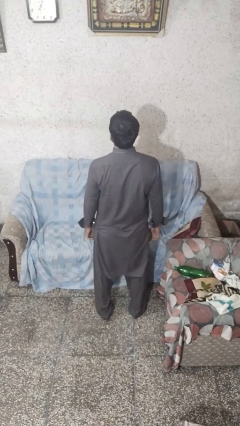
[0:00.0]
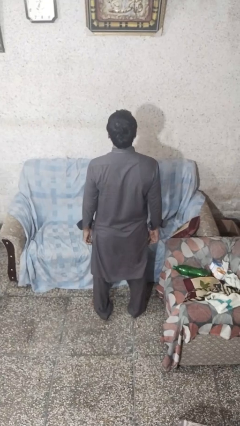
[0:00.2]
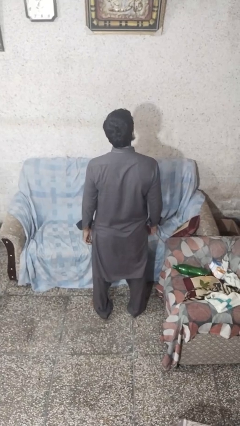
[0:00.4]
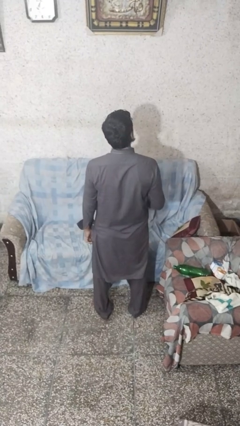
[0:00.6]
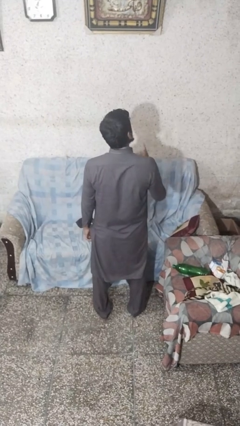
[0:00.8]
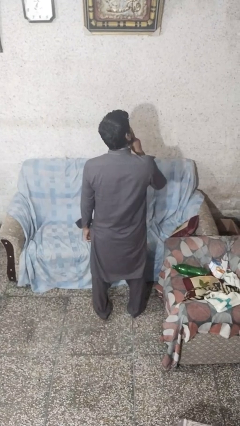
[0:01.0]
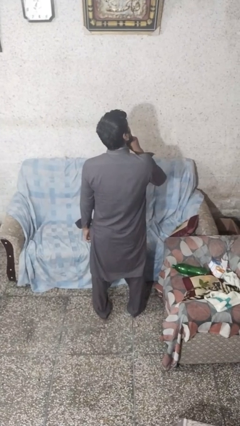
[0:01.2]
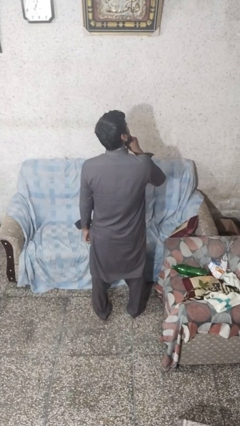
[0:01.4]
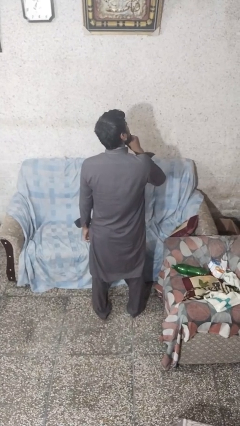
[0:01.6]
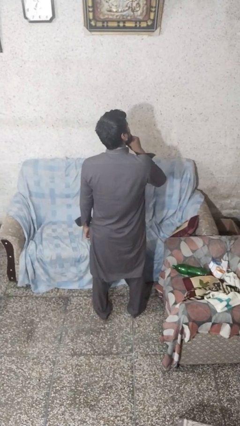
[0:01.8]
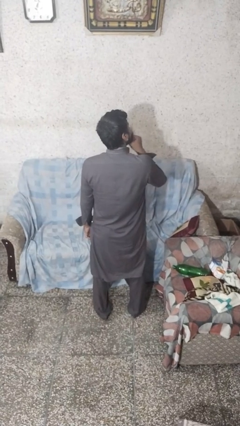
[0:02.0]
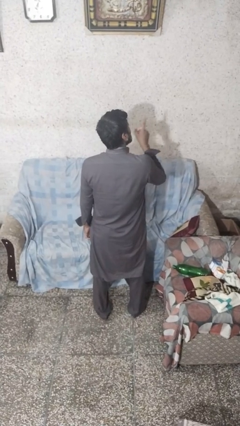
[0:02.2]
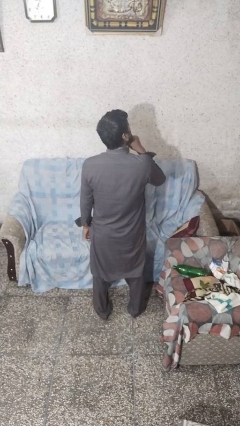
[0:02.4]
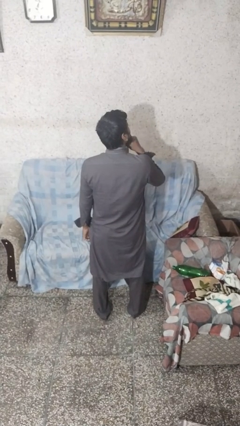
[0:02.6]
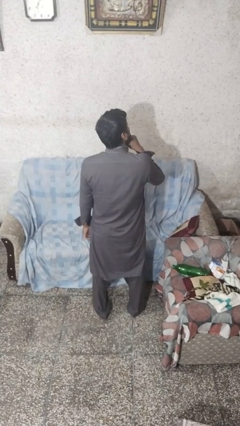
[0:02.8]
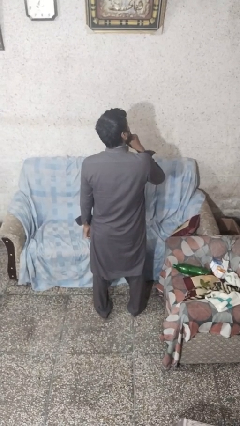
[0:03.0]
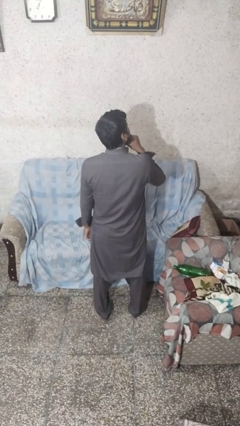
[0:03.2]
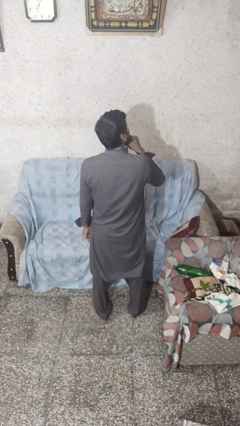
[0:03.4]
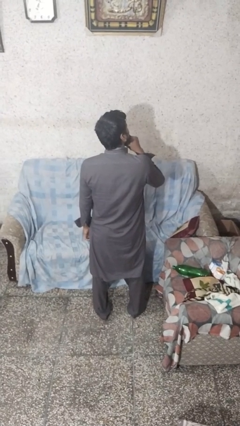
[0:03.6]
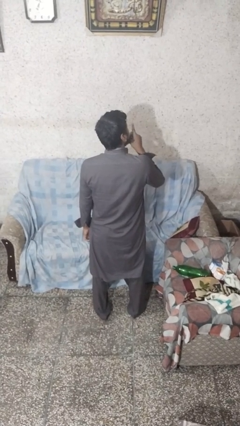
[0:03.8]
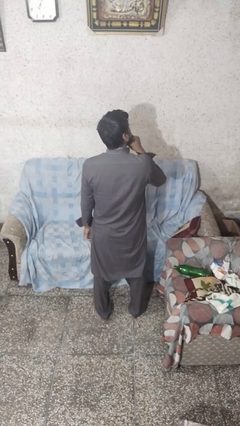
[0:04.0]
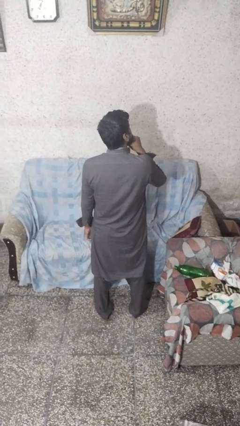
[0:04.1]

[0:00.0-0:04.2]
person gestures be quiet

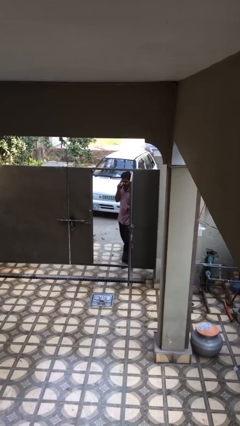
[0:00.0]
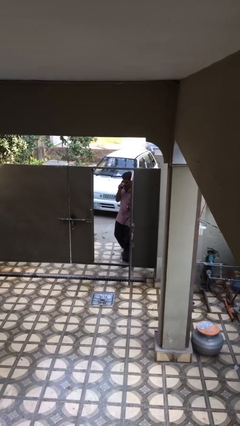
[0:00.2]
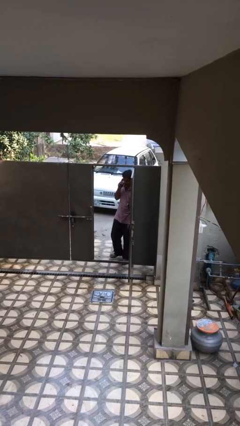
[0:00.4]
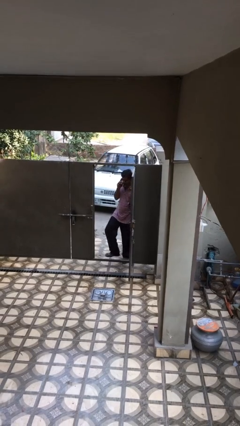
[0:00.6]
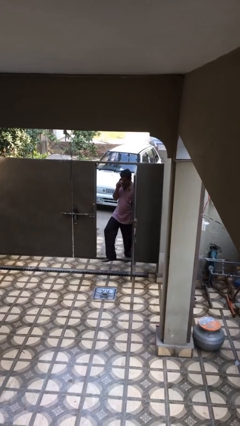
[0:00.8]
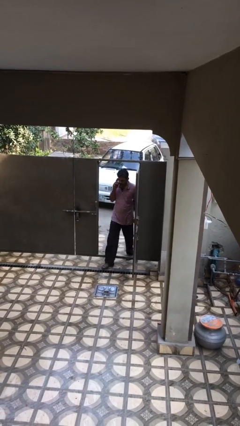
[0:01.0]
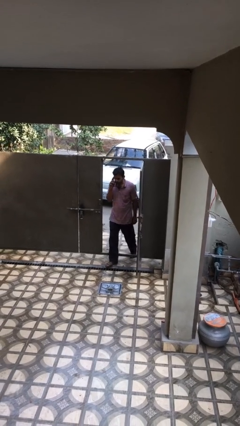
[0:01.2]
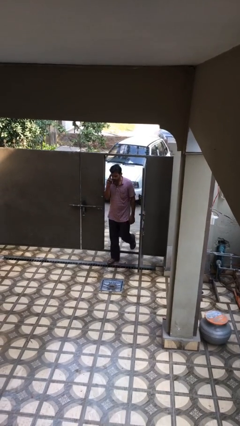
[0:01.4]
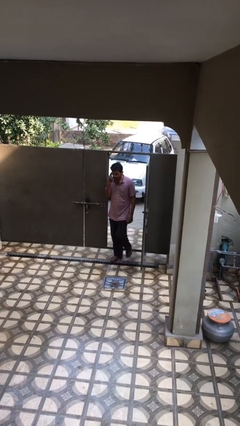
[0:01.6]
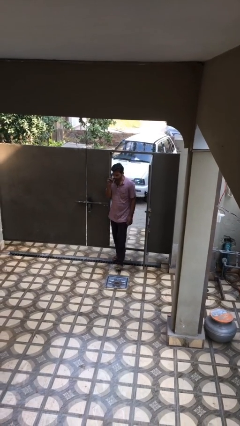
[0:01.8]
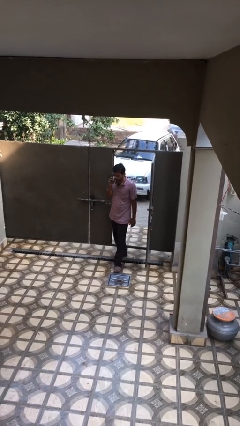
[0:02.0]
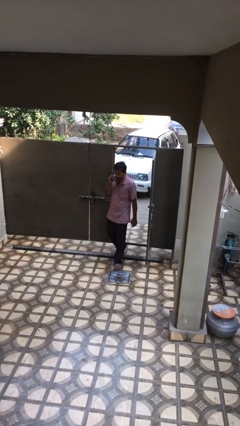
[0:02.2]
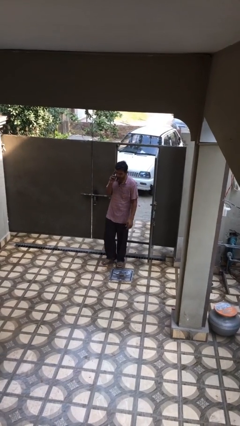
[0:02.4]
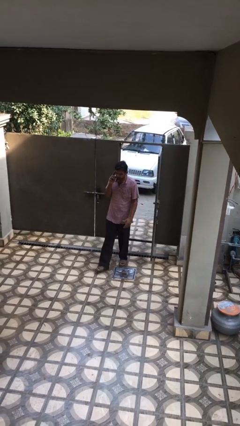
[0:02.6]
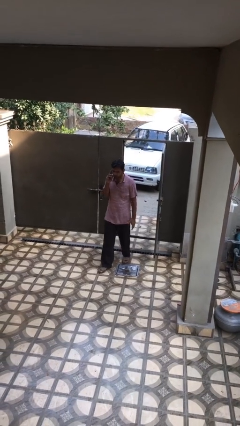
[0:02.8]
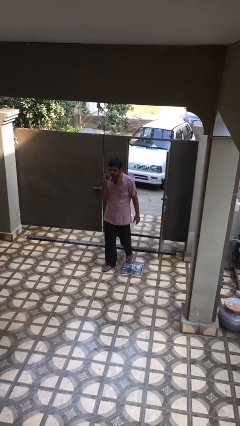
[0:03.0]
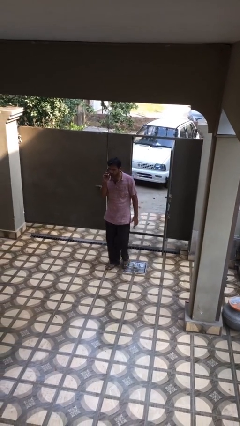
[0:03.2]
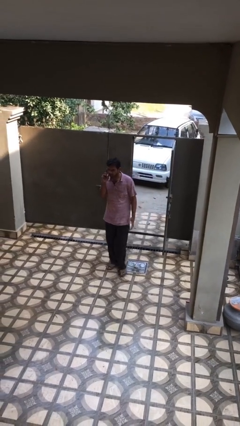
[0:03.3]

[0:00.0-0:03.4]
person enters scene through structure

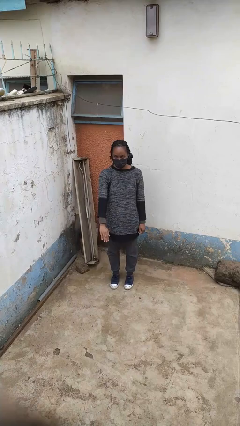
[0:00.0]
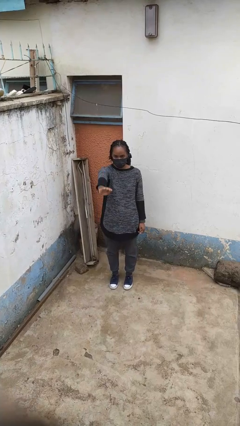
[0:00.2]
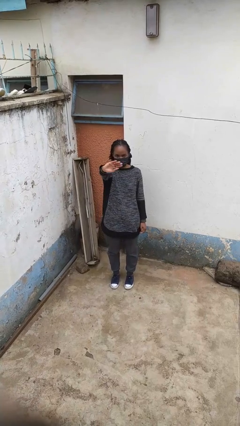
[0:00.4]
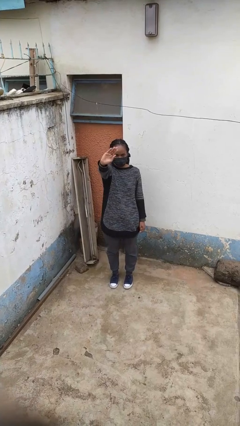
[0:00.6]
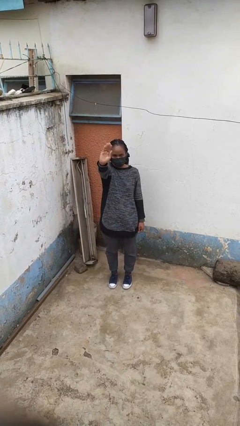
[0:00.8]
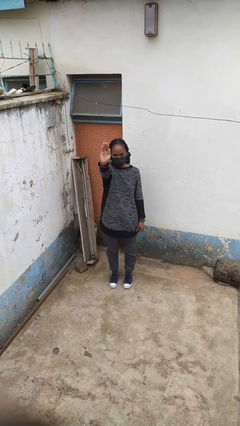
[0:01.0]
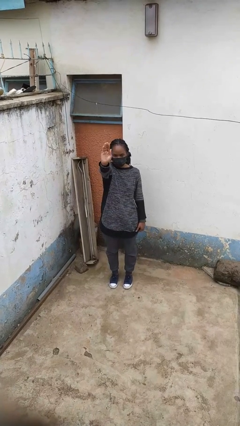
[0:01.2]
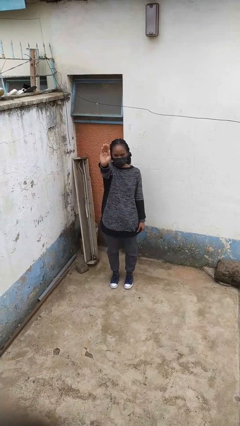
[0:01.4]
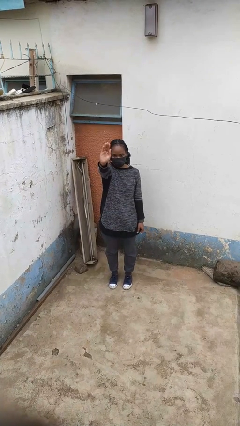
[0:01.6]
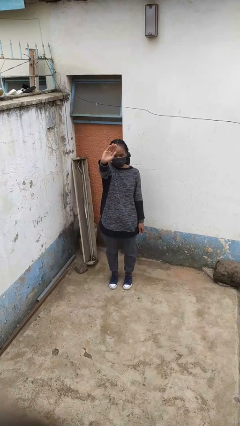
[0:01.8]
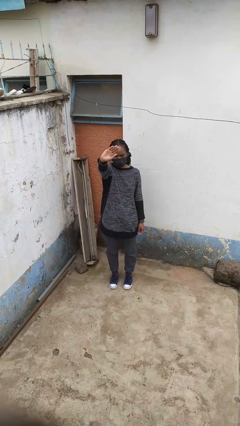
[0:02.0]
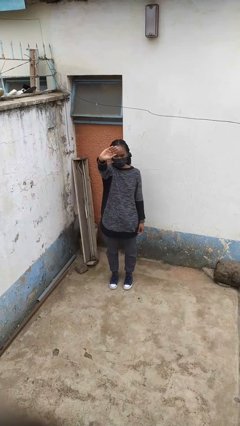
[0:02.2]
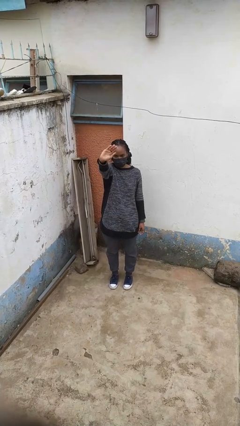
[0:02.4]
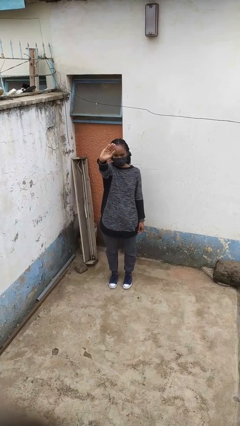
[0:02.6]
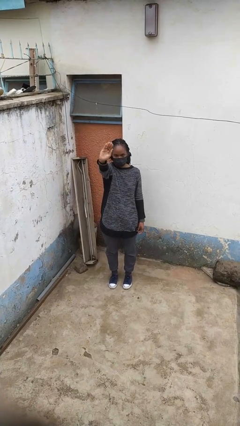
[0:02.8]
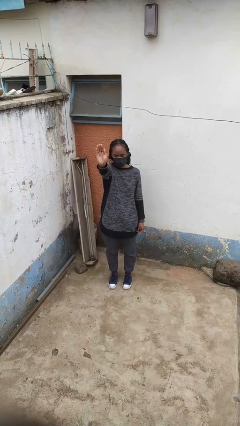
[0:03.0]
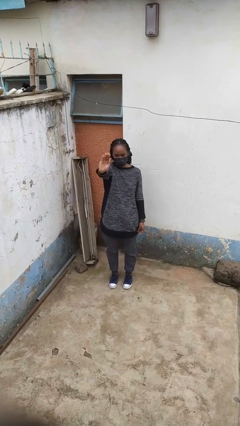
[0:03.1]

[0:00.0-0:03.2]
person waves at person

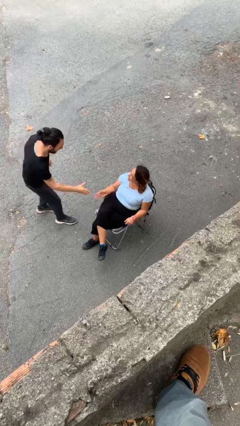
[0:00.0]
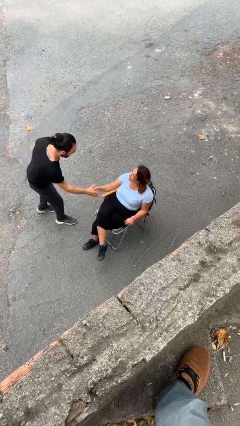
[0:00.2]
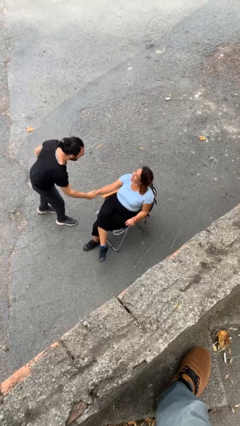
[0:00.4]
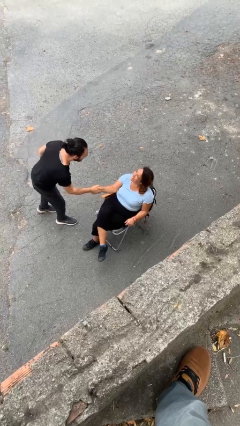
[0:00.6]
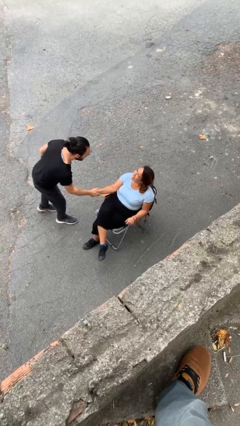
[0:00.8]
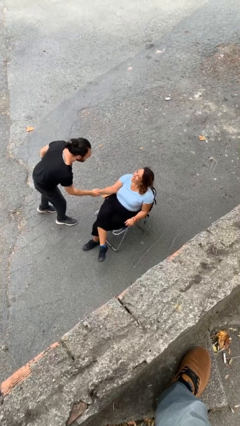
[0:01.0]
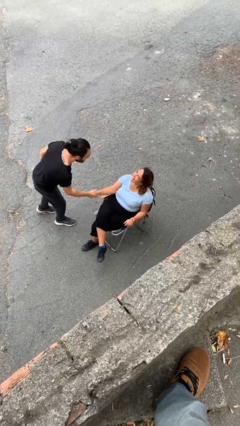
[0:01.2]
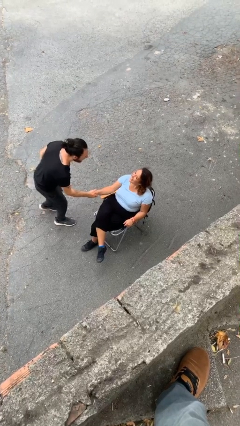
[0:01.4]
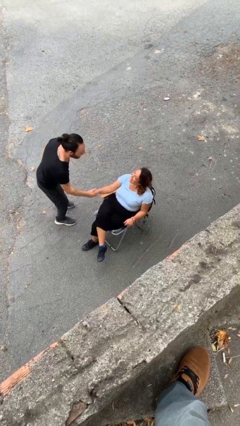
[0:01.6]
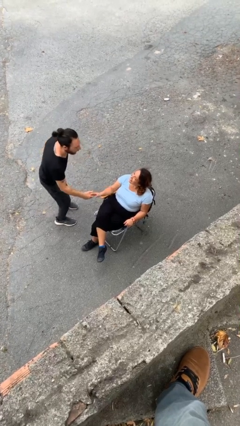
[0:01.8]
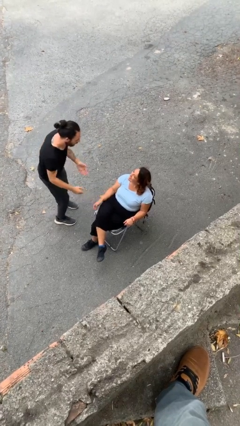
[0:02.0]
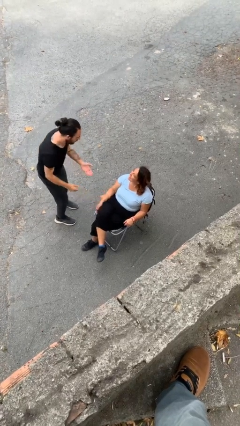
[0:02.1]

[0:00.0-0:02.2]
person shakes hand

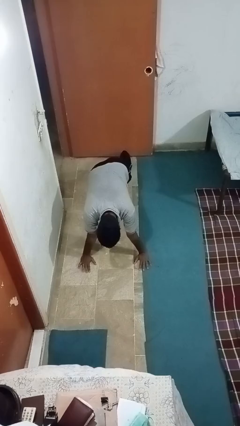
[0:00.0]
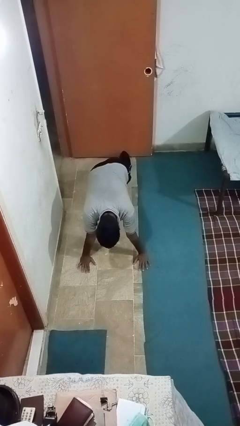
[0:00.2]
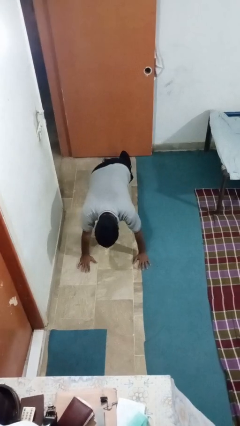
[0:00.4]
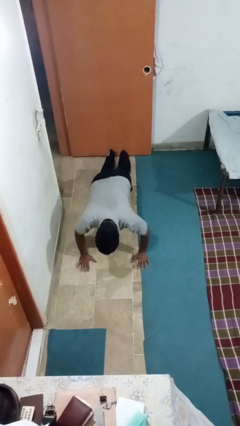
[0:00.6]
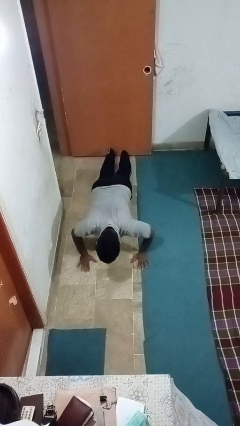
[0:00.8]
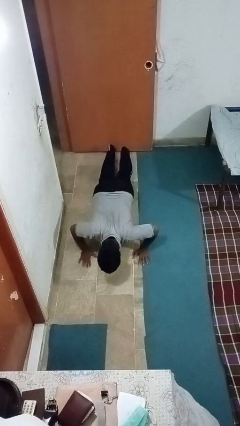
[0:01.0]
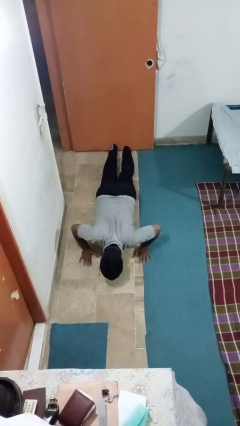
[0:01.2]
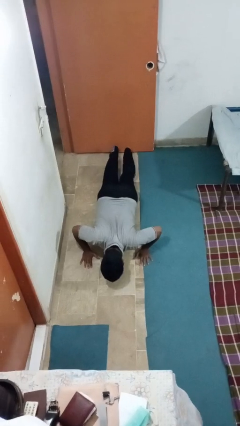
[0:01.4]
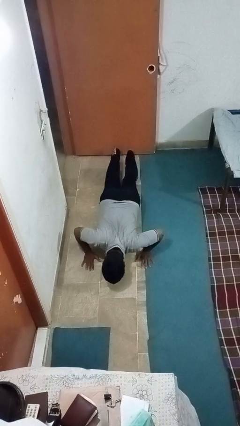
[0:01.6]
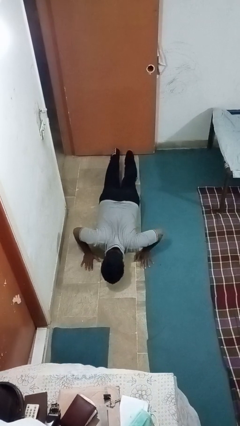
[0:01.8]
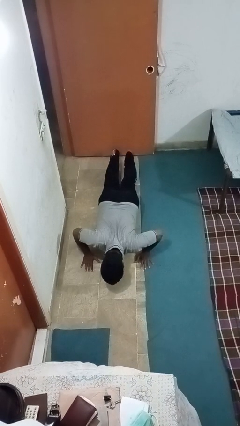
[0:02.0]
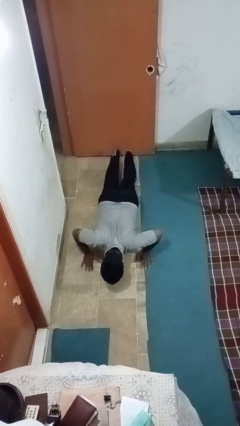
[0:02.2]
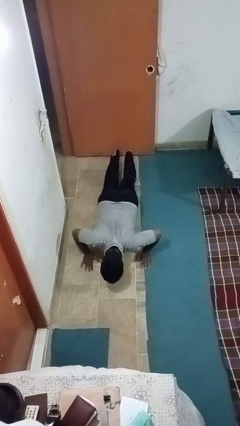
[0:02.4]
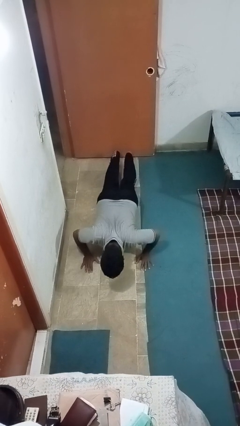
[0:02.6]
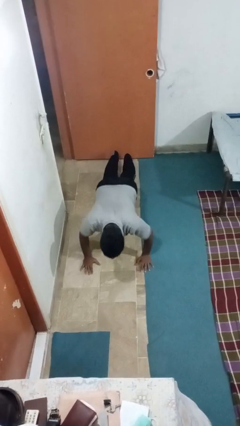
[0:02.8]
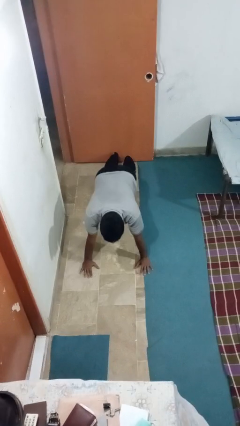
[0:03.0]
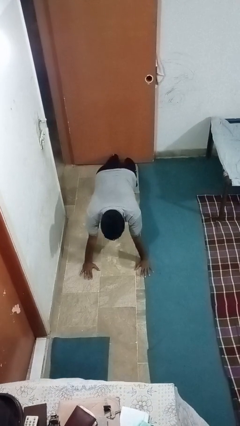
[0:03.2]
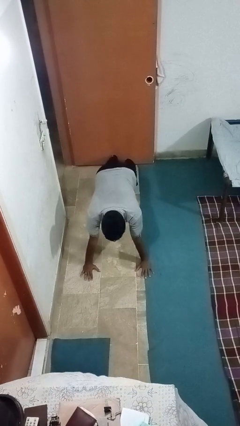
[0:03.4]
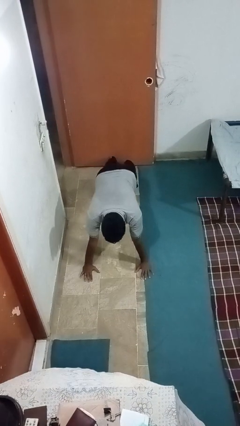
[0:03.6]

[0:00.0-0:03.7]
person exercises with pushup

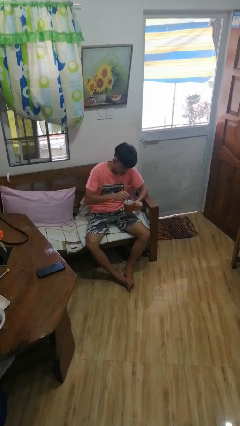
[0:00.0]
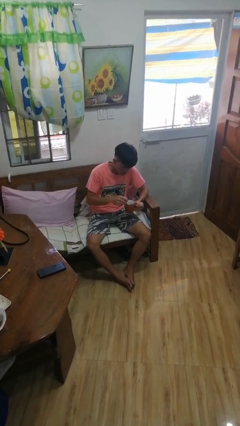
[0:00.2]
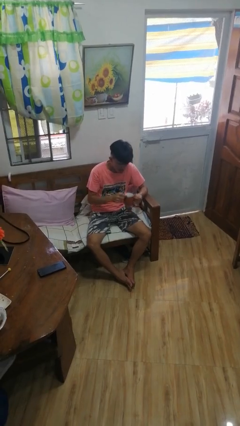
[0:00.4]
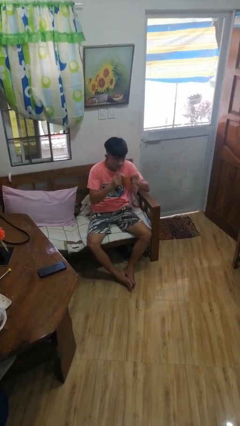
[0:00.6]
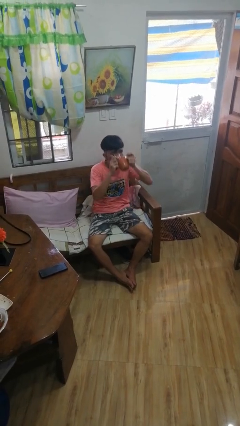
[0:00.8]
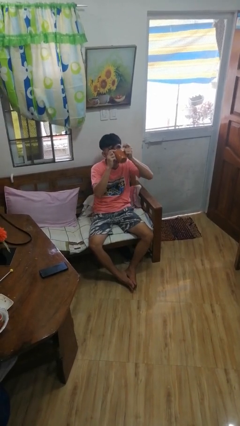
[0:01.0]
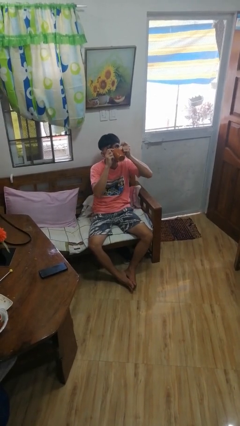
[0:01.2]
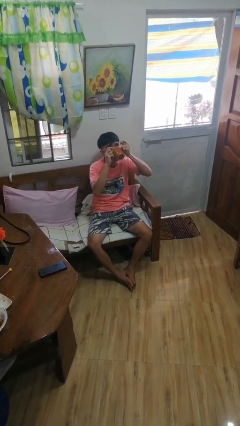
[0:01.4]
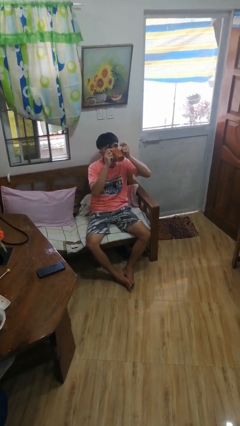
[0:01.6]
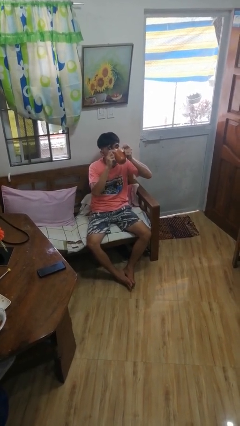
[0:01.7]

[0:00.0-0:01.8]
person drinks from mug
